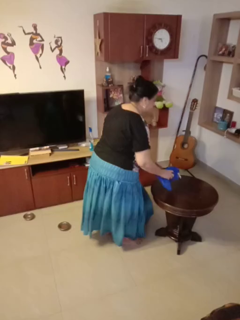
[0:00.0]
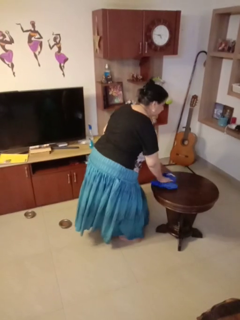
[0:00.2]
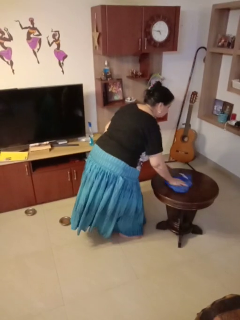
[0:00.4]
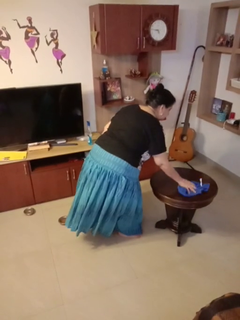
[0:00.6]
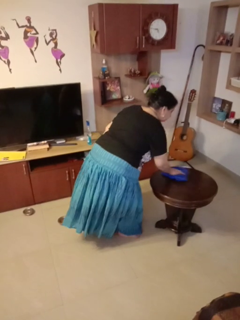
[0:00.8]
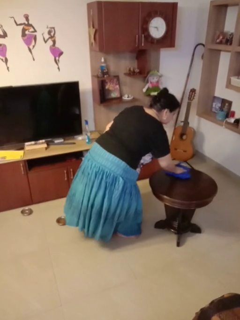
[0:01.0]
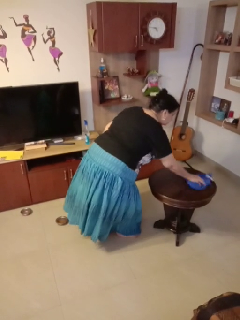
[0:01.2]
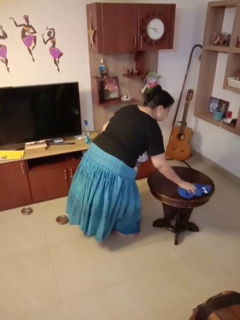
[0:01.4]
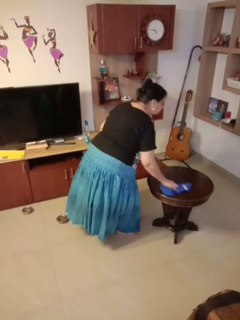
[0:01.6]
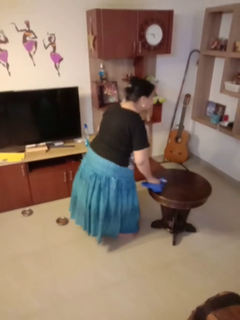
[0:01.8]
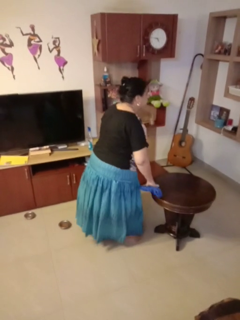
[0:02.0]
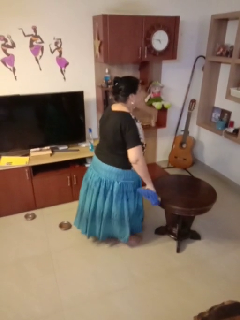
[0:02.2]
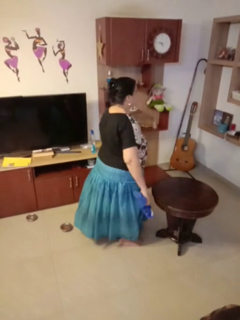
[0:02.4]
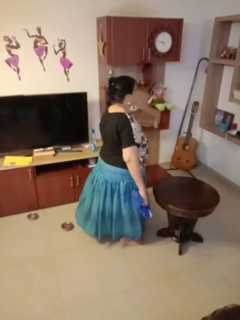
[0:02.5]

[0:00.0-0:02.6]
person cleans table with rag

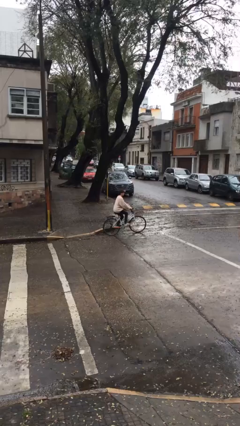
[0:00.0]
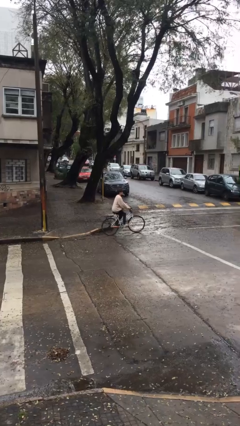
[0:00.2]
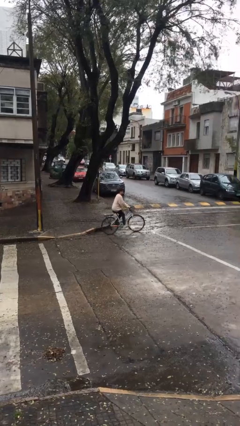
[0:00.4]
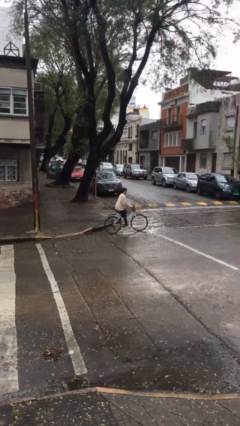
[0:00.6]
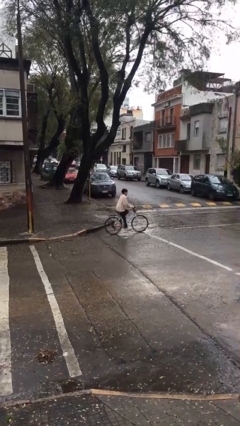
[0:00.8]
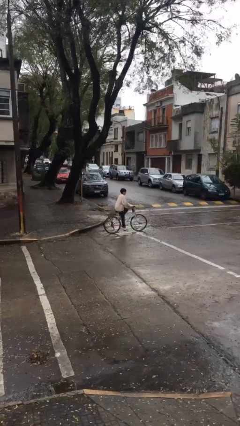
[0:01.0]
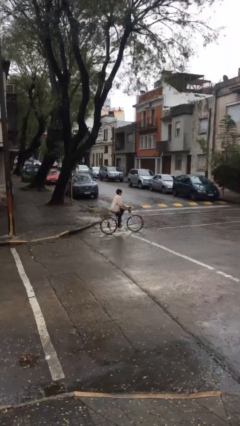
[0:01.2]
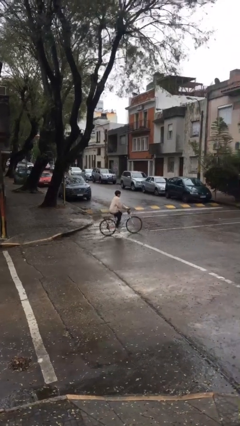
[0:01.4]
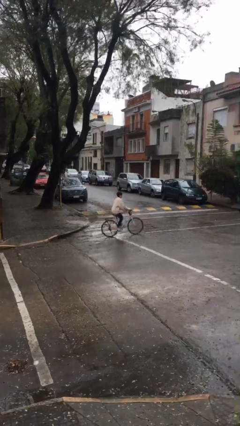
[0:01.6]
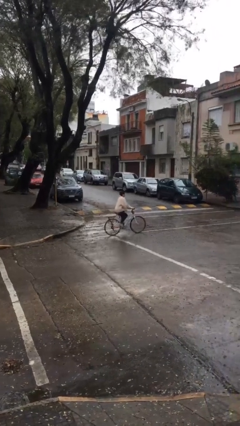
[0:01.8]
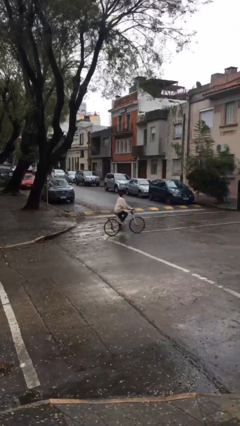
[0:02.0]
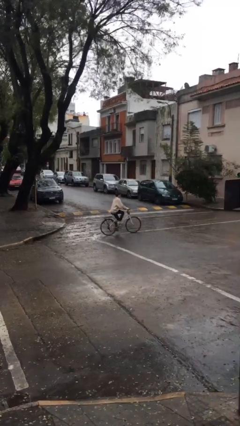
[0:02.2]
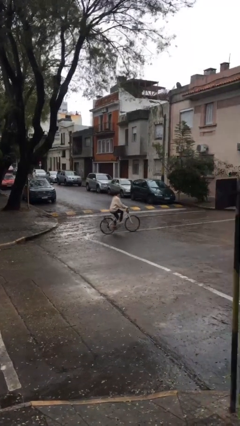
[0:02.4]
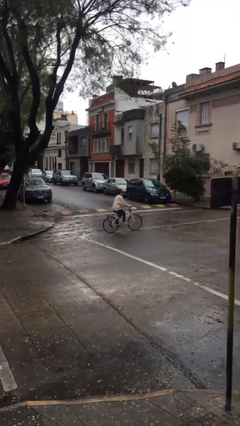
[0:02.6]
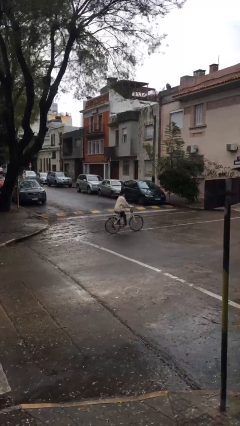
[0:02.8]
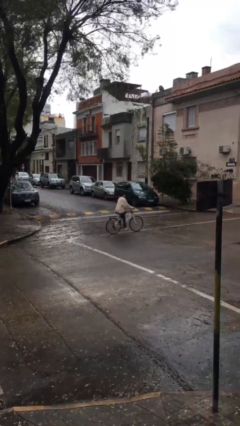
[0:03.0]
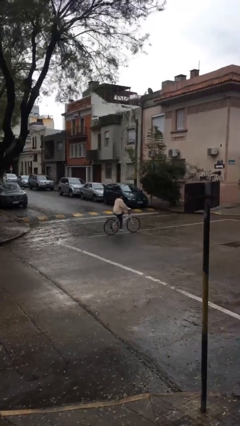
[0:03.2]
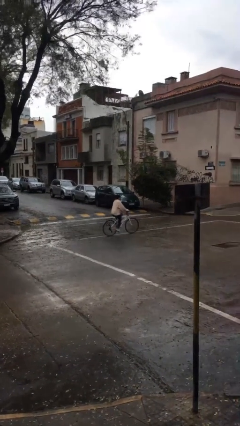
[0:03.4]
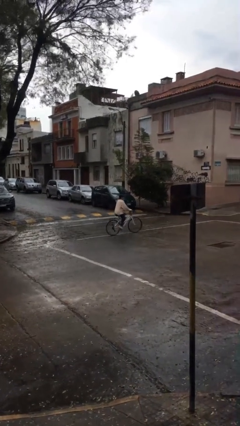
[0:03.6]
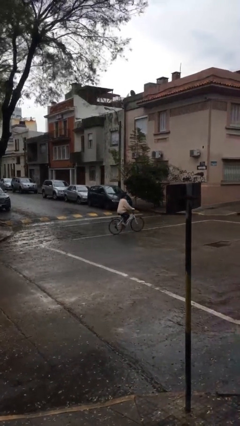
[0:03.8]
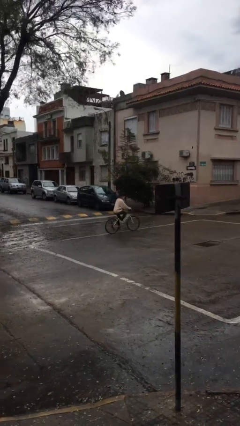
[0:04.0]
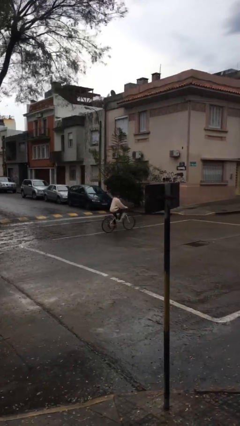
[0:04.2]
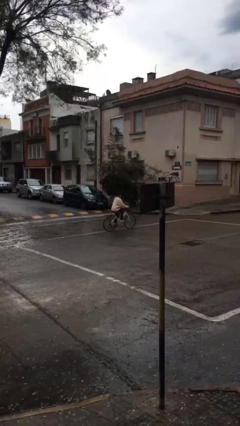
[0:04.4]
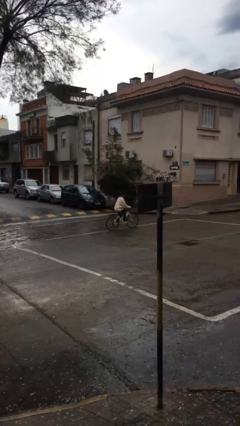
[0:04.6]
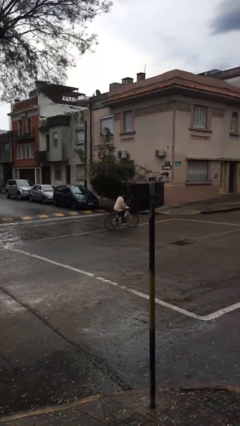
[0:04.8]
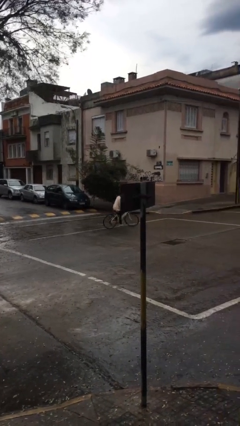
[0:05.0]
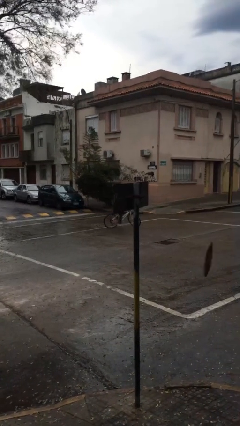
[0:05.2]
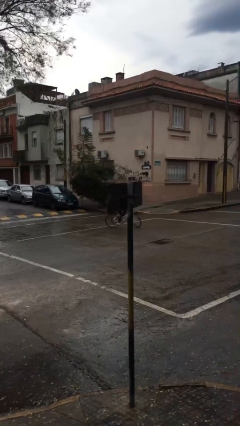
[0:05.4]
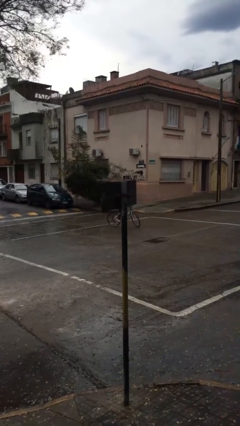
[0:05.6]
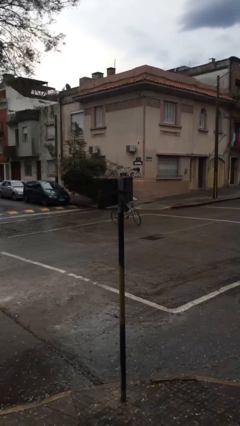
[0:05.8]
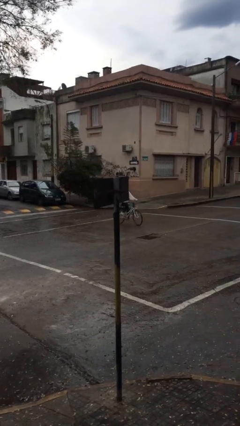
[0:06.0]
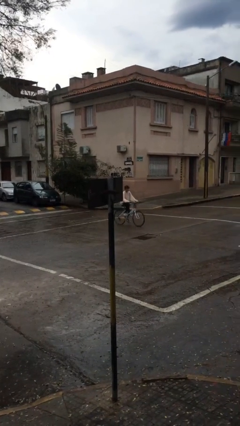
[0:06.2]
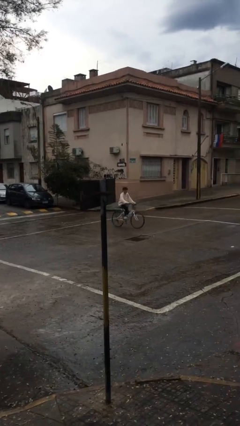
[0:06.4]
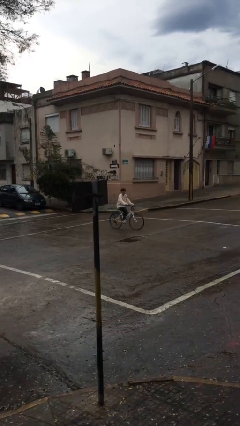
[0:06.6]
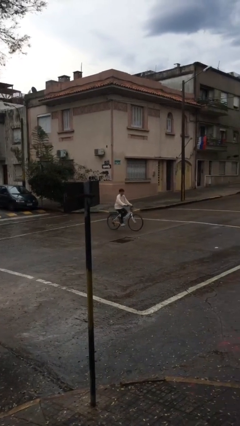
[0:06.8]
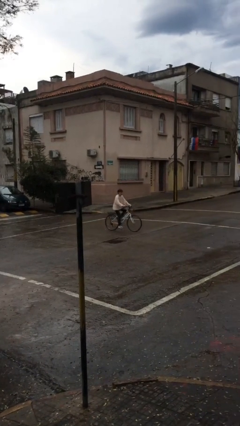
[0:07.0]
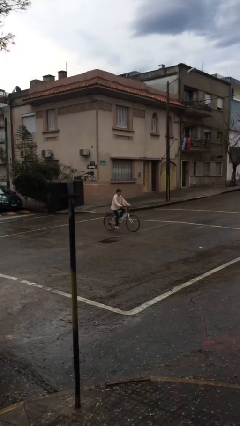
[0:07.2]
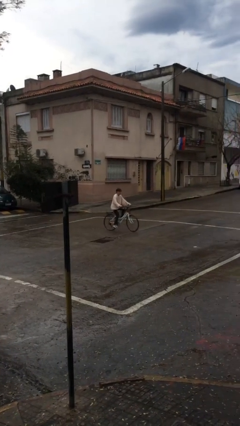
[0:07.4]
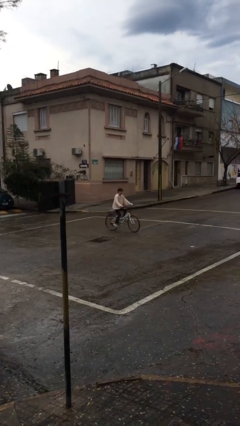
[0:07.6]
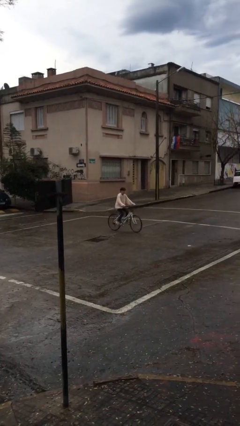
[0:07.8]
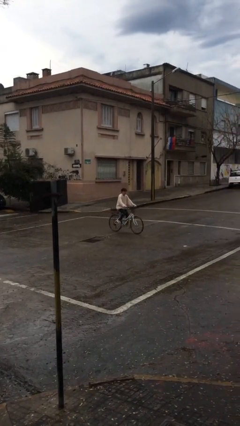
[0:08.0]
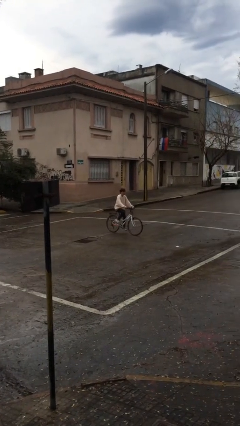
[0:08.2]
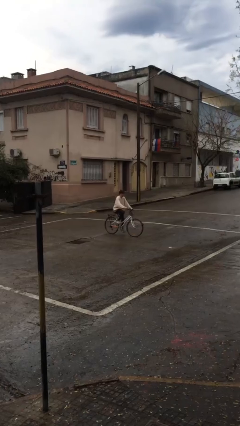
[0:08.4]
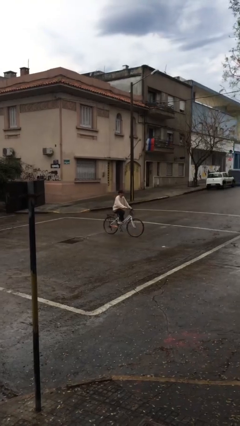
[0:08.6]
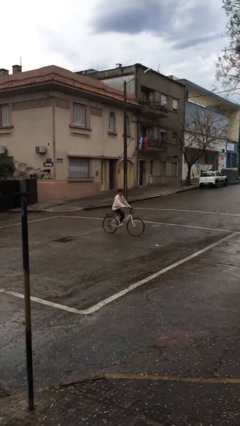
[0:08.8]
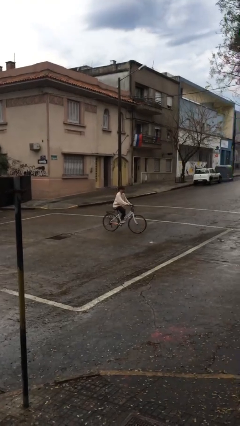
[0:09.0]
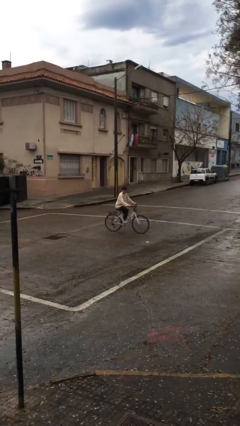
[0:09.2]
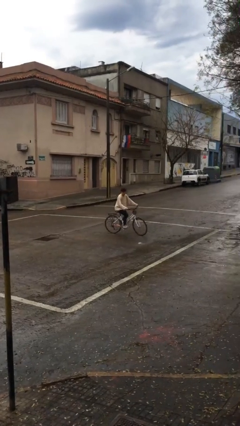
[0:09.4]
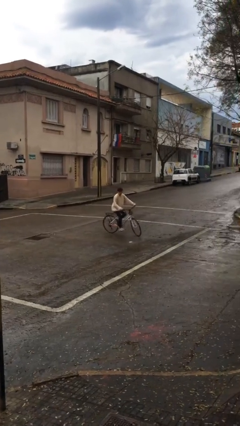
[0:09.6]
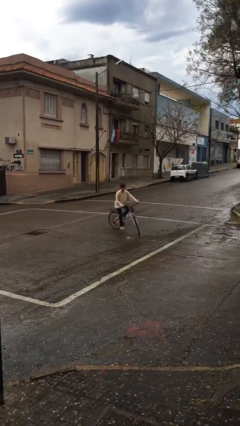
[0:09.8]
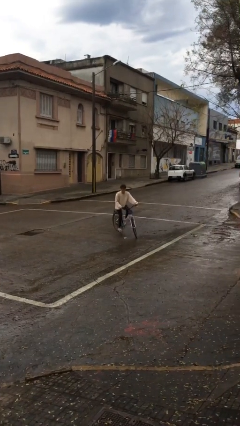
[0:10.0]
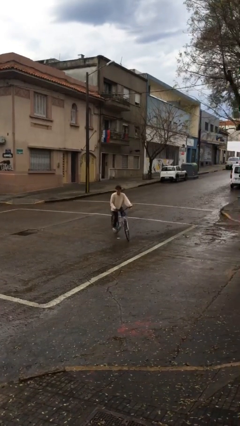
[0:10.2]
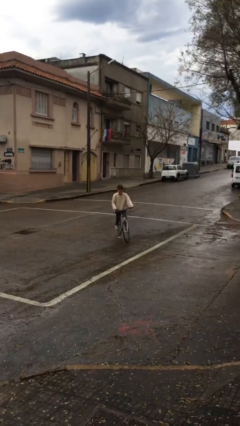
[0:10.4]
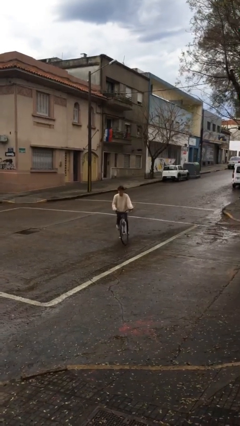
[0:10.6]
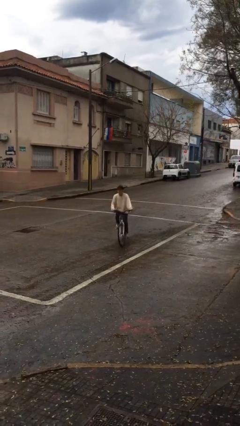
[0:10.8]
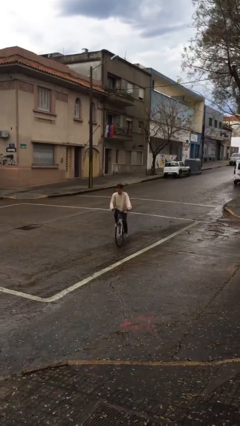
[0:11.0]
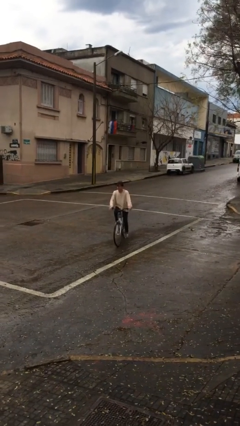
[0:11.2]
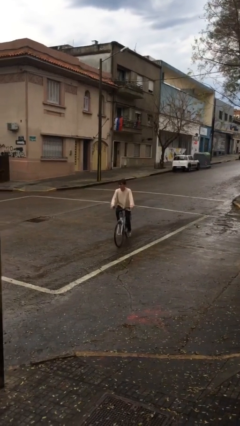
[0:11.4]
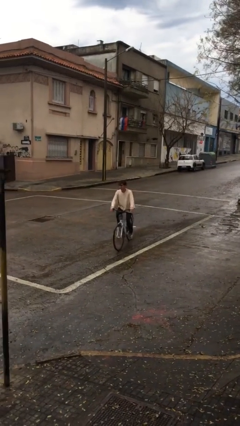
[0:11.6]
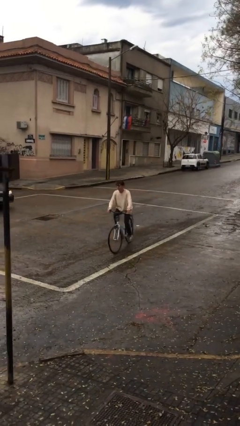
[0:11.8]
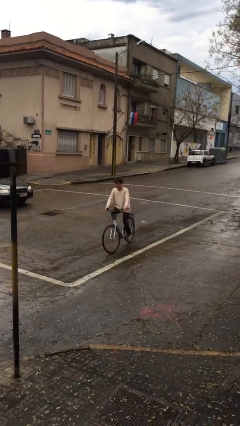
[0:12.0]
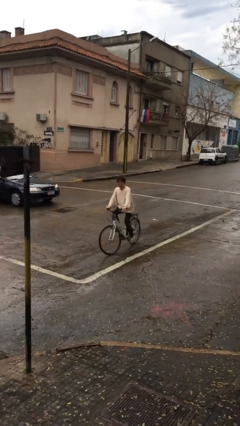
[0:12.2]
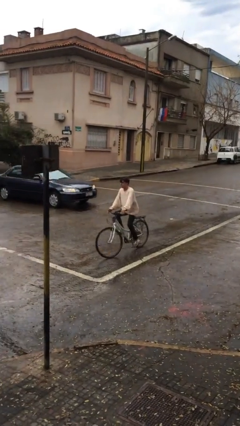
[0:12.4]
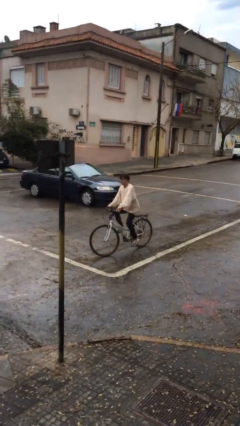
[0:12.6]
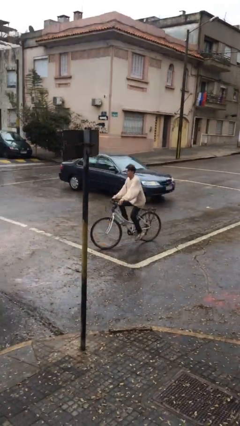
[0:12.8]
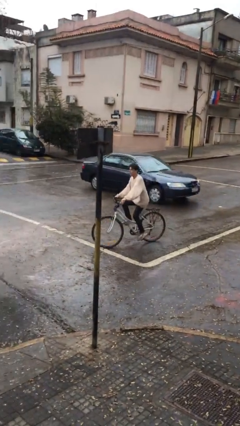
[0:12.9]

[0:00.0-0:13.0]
person rides bicycle

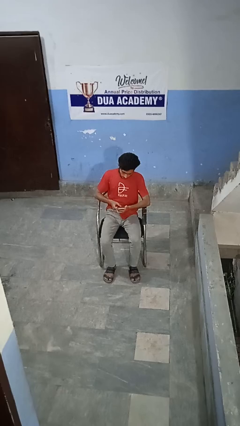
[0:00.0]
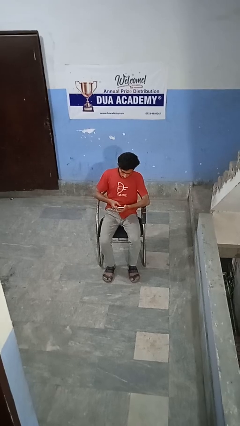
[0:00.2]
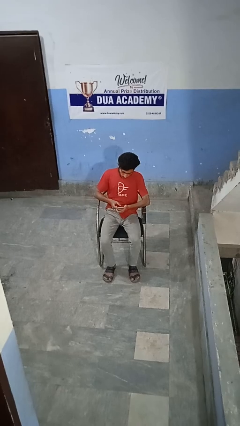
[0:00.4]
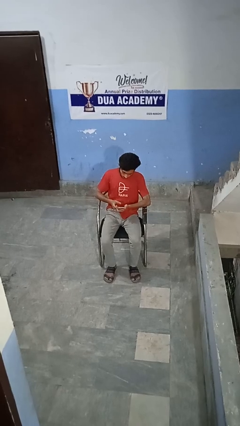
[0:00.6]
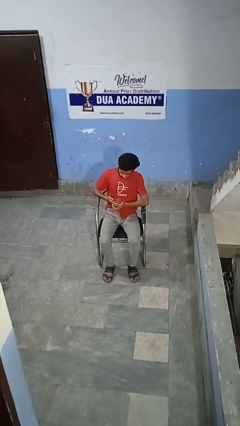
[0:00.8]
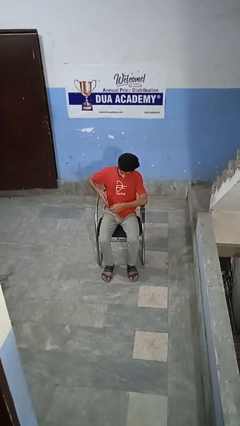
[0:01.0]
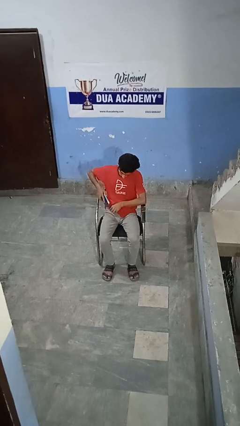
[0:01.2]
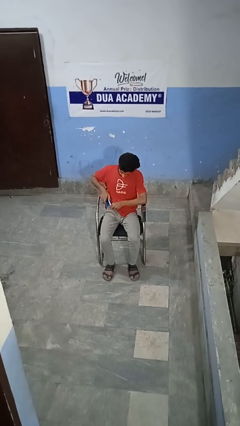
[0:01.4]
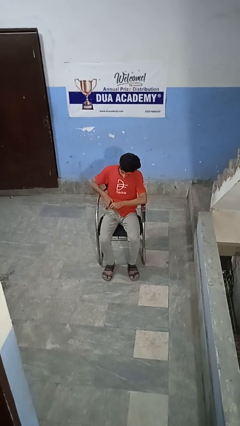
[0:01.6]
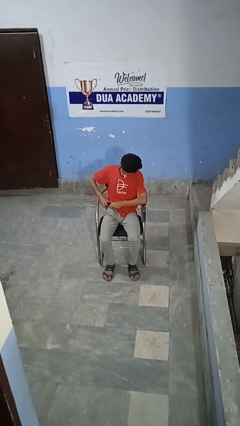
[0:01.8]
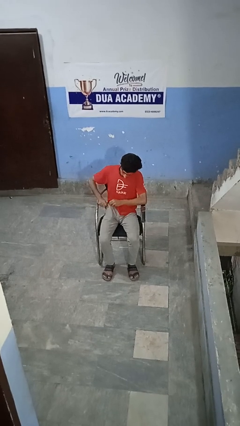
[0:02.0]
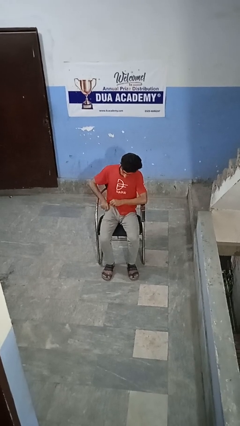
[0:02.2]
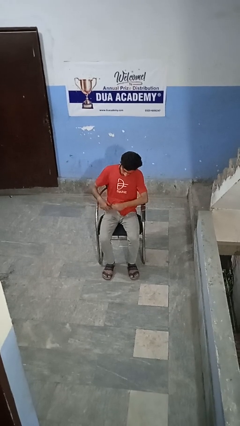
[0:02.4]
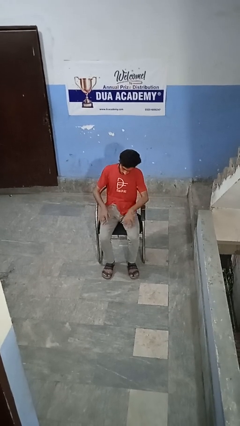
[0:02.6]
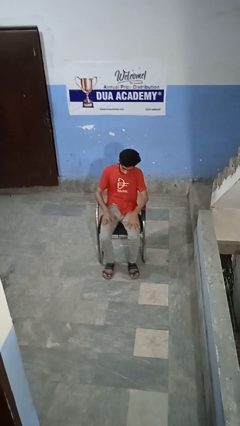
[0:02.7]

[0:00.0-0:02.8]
person puts phone into pocket

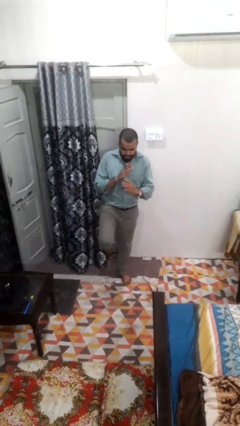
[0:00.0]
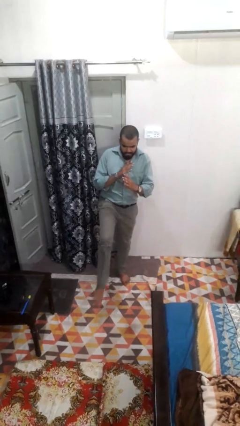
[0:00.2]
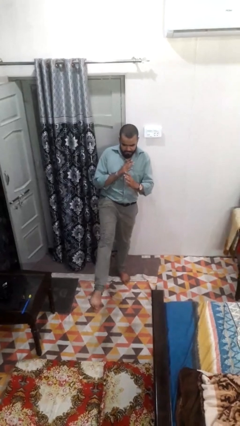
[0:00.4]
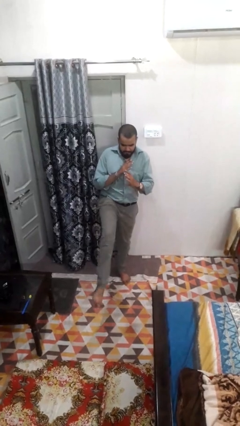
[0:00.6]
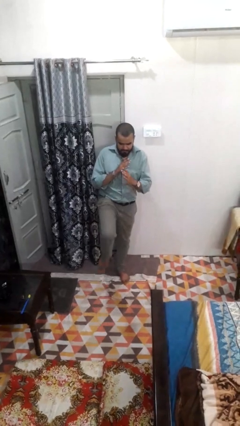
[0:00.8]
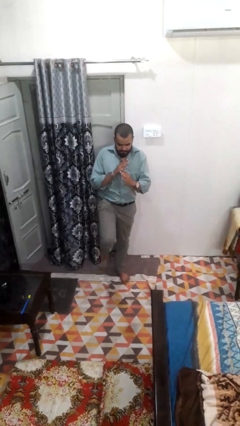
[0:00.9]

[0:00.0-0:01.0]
person karate kicks
